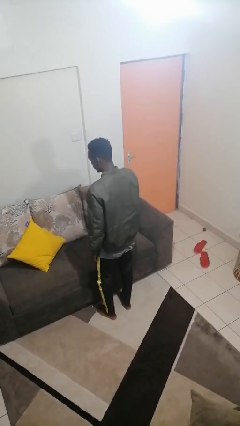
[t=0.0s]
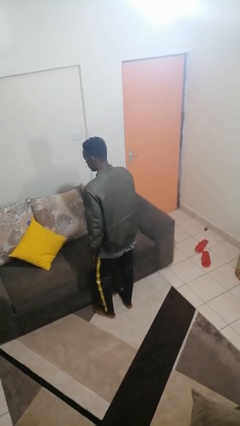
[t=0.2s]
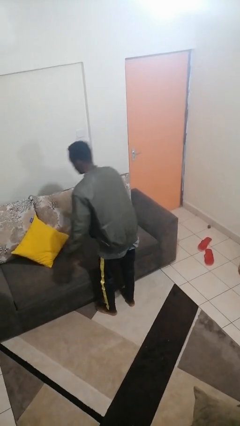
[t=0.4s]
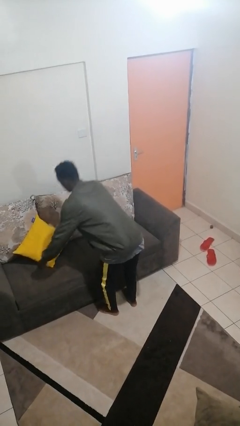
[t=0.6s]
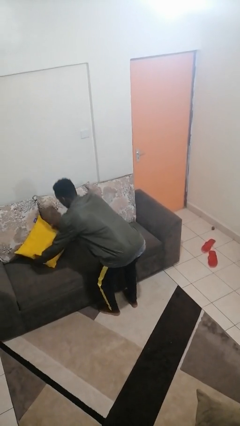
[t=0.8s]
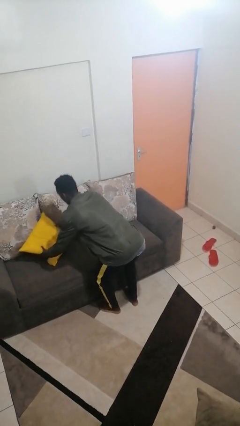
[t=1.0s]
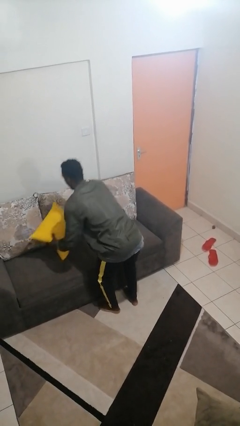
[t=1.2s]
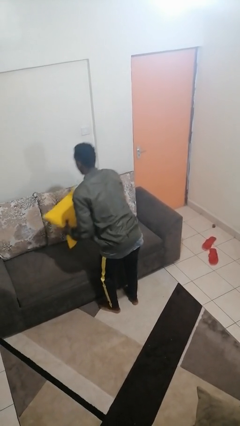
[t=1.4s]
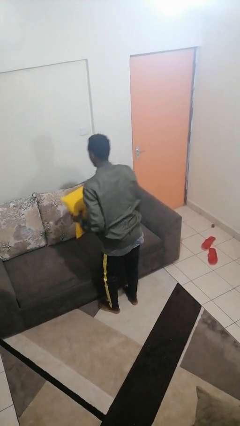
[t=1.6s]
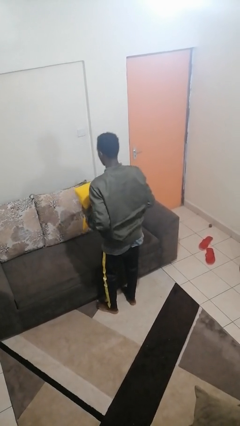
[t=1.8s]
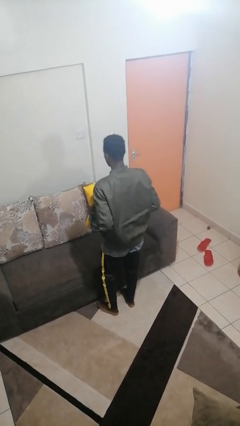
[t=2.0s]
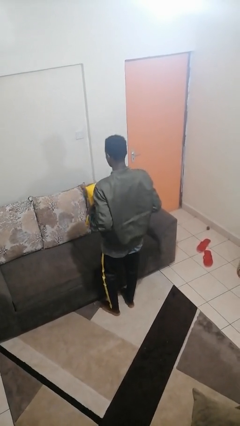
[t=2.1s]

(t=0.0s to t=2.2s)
person picks up object from couch

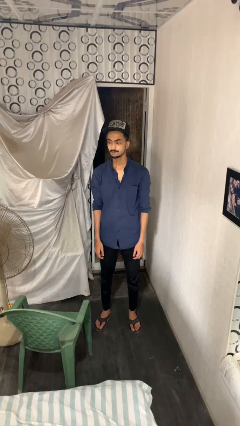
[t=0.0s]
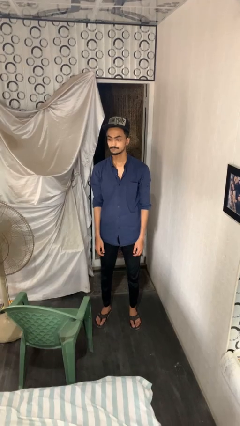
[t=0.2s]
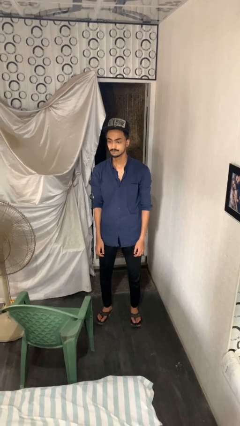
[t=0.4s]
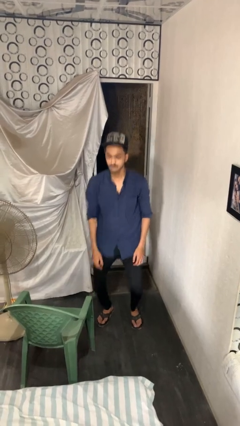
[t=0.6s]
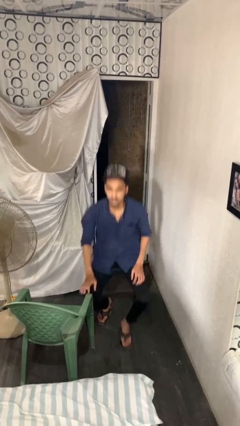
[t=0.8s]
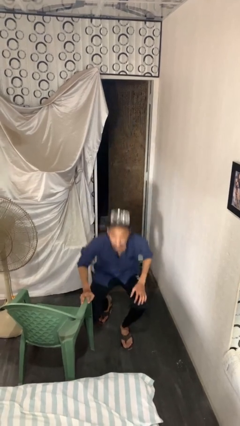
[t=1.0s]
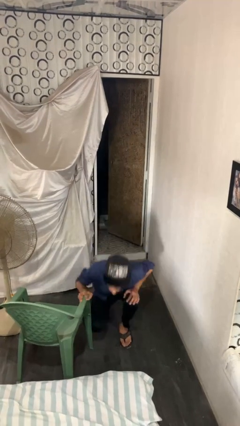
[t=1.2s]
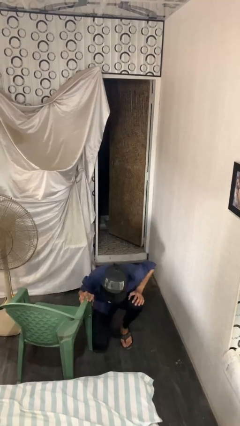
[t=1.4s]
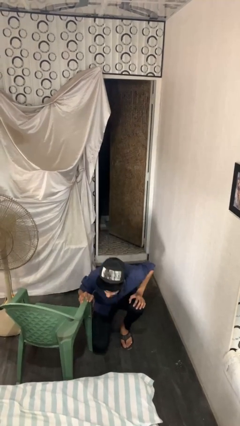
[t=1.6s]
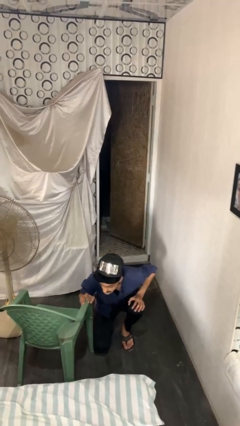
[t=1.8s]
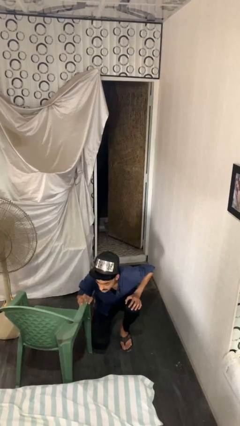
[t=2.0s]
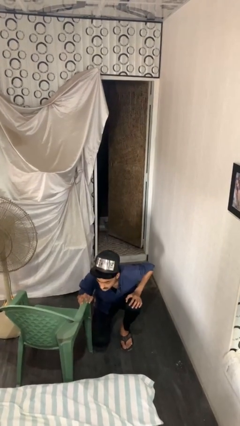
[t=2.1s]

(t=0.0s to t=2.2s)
person trips on object on floor

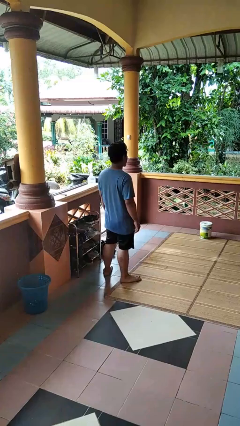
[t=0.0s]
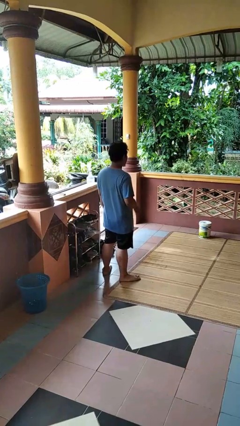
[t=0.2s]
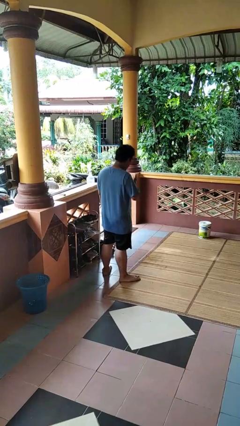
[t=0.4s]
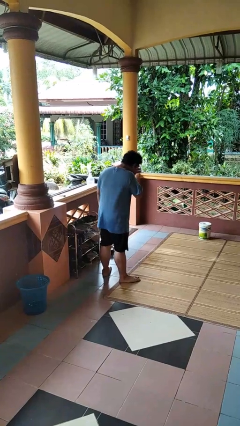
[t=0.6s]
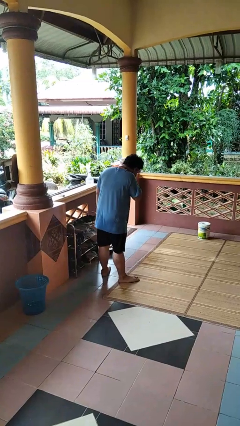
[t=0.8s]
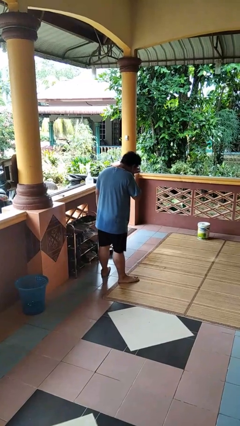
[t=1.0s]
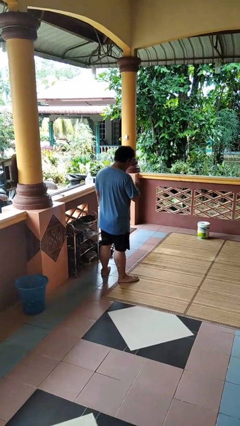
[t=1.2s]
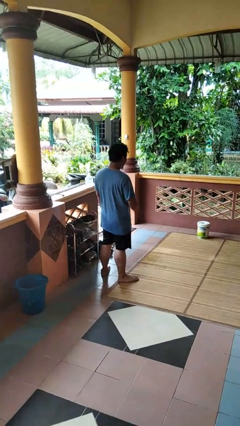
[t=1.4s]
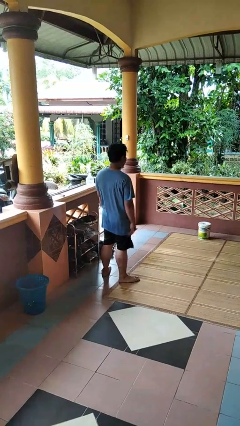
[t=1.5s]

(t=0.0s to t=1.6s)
person sneezes into hand

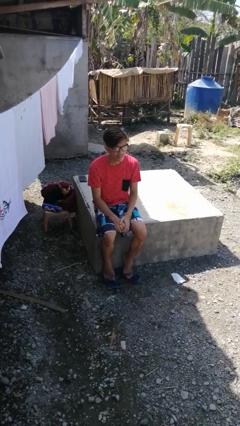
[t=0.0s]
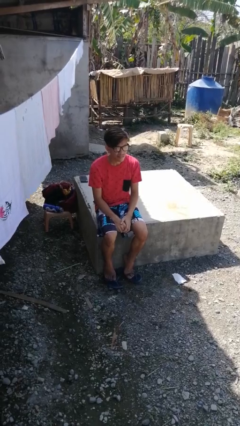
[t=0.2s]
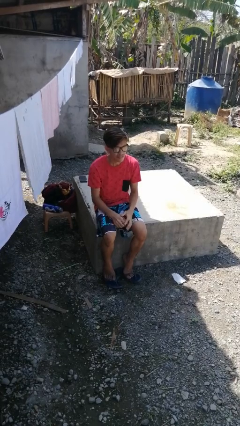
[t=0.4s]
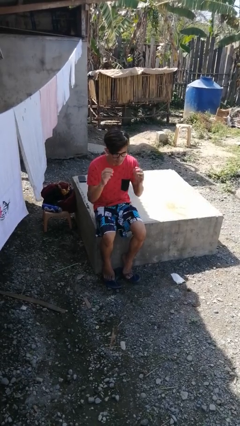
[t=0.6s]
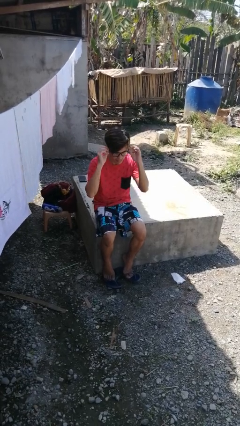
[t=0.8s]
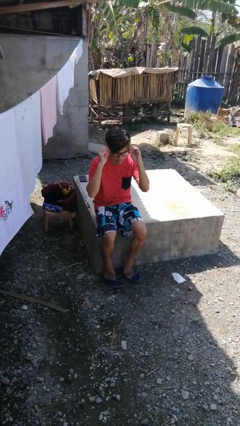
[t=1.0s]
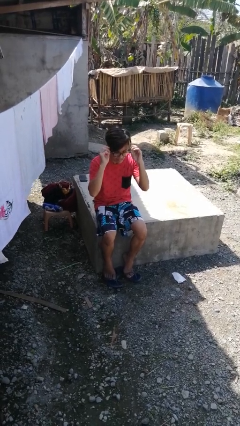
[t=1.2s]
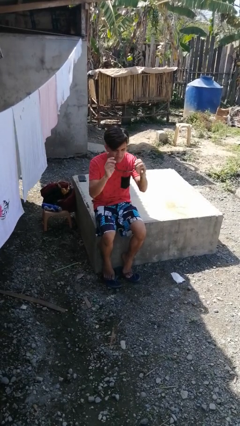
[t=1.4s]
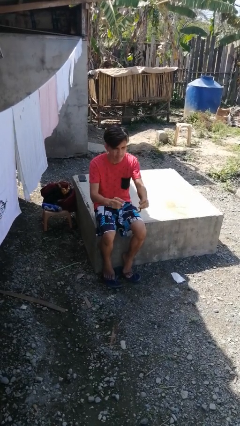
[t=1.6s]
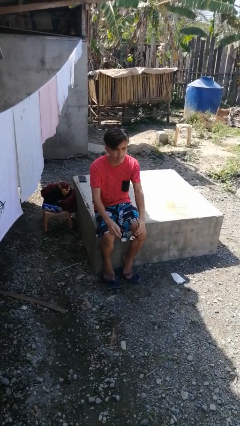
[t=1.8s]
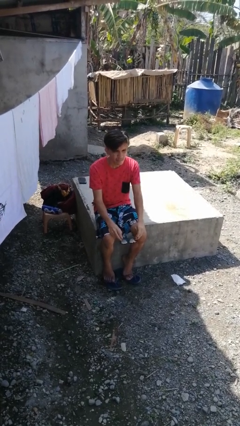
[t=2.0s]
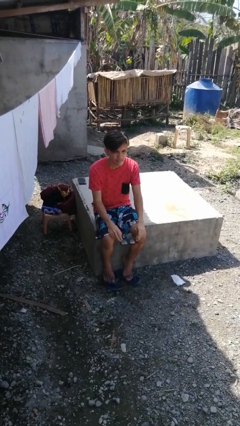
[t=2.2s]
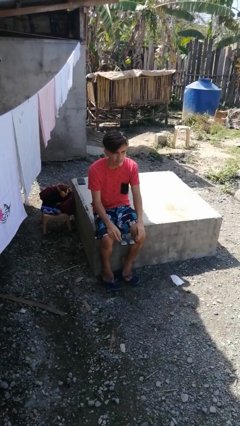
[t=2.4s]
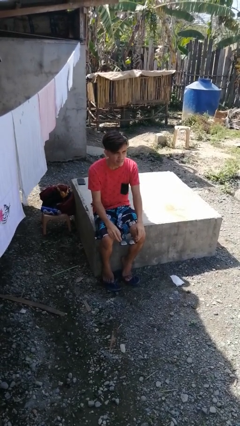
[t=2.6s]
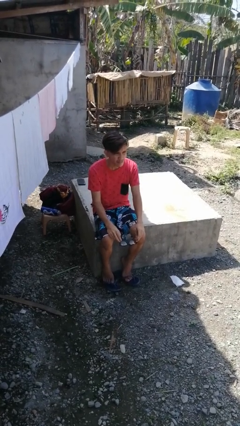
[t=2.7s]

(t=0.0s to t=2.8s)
person takes off glasses

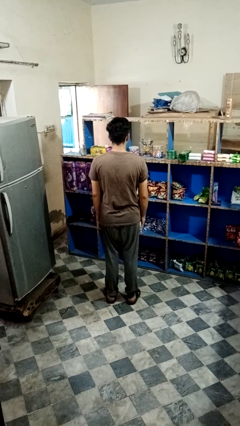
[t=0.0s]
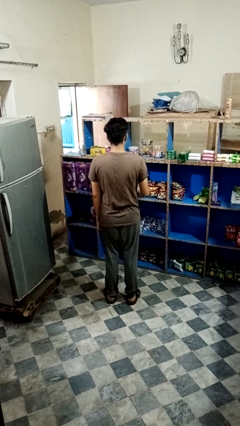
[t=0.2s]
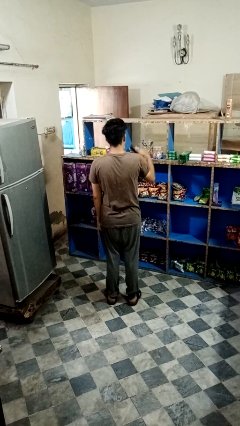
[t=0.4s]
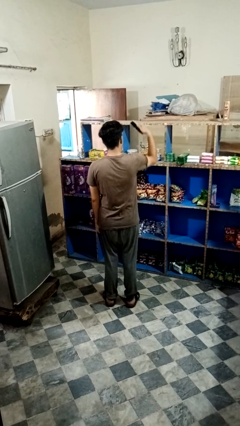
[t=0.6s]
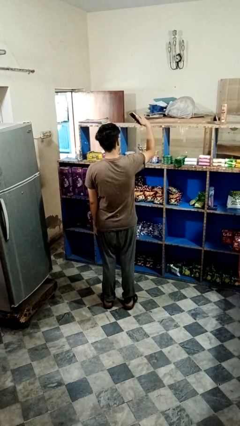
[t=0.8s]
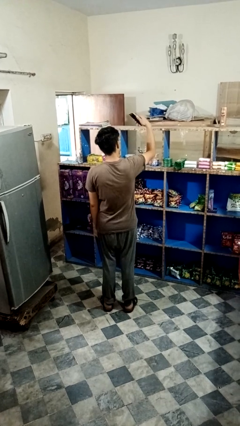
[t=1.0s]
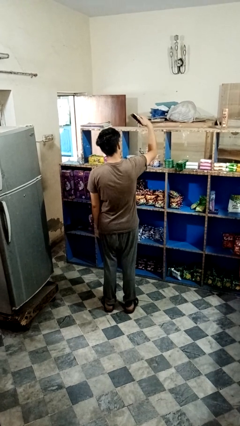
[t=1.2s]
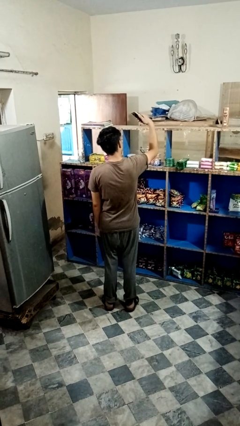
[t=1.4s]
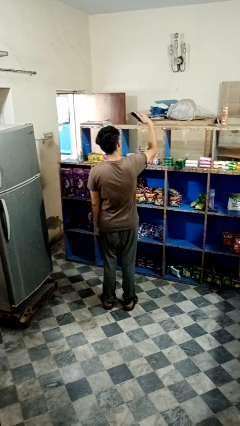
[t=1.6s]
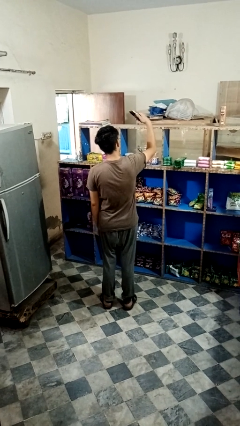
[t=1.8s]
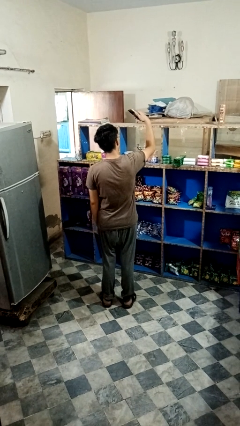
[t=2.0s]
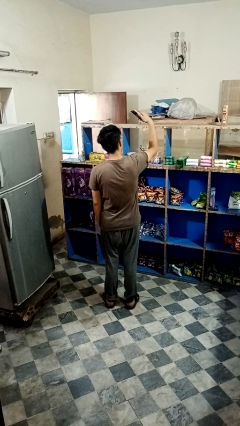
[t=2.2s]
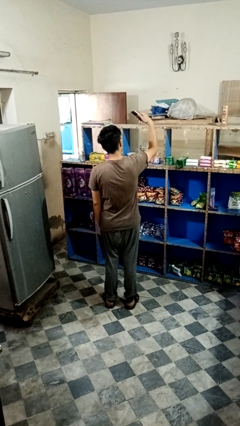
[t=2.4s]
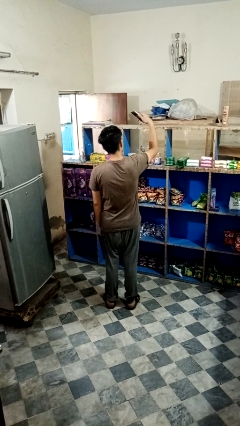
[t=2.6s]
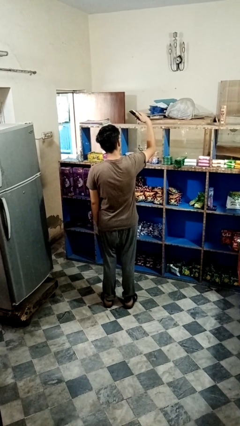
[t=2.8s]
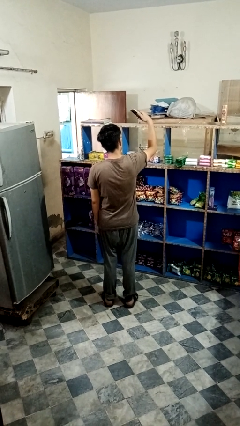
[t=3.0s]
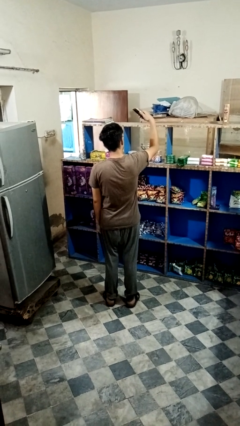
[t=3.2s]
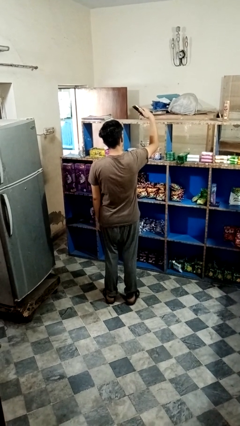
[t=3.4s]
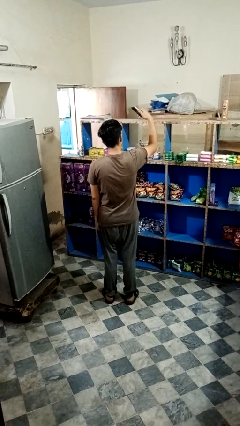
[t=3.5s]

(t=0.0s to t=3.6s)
person takes selfie

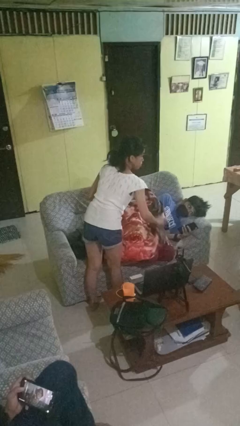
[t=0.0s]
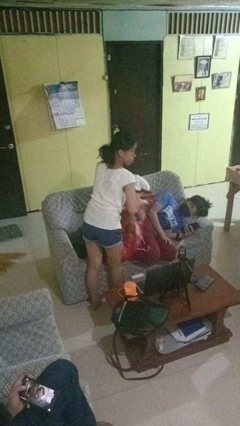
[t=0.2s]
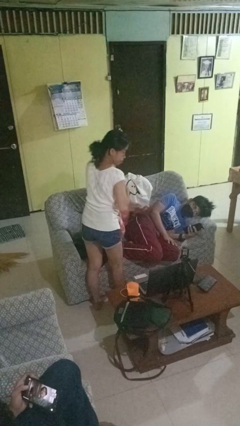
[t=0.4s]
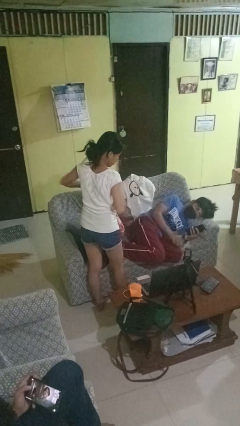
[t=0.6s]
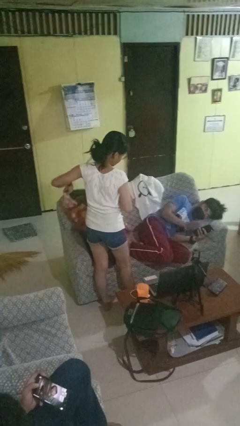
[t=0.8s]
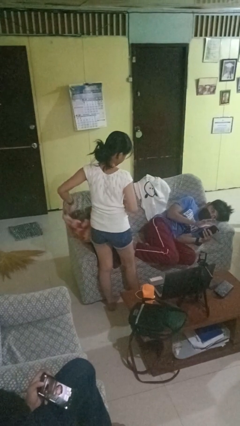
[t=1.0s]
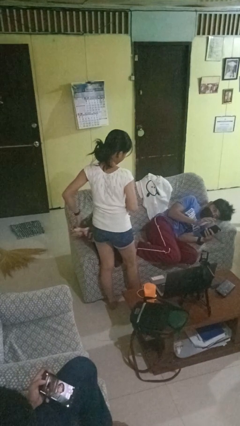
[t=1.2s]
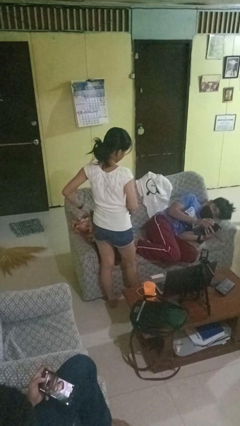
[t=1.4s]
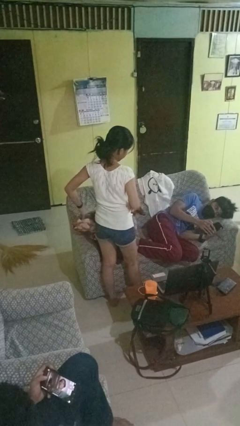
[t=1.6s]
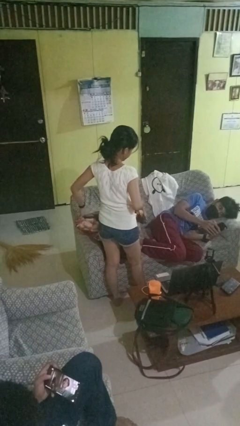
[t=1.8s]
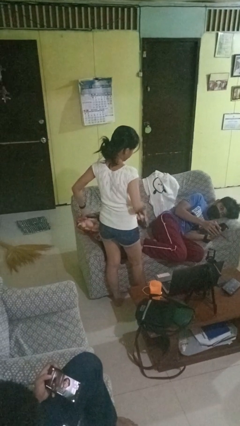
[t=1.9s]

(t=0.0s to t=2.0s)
person uncovers friend with blanket

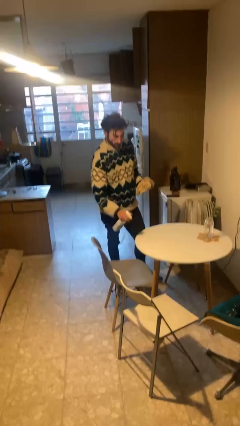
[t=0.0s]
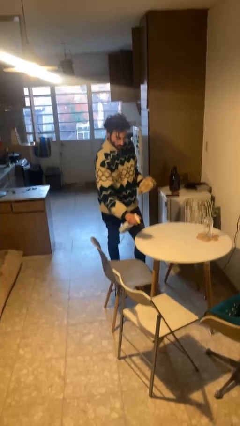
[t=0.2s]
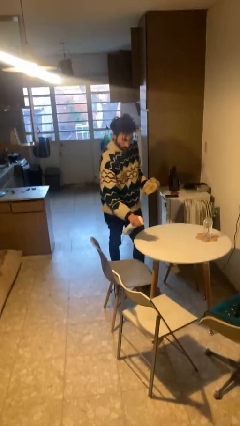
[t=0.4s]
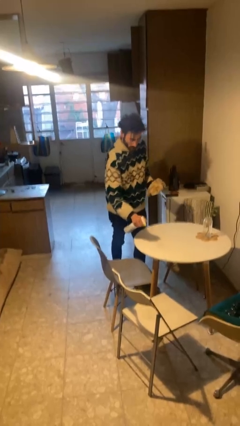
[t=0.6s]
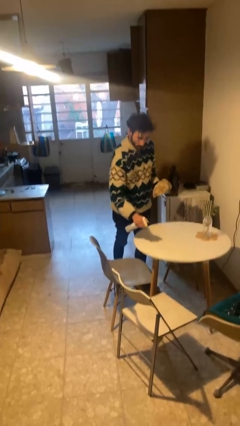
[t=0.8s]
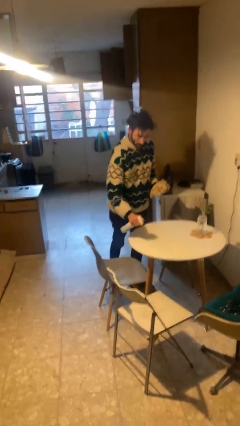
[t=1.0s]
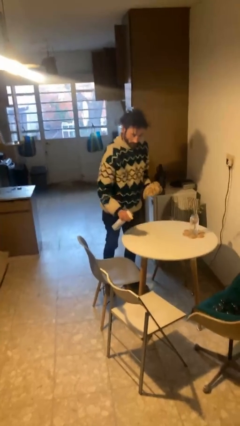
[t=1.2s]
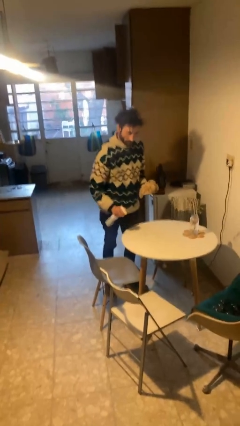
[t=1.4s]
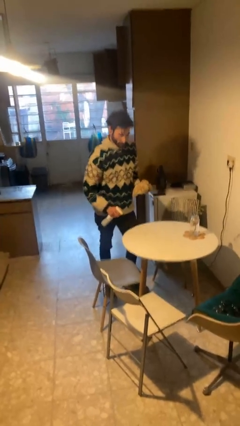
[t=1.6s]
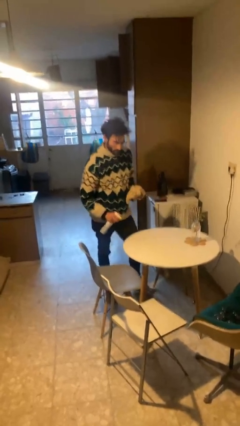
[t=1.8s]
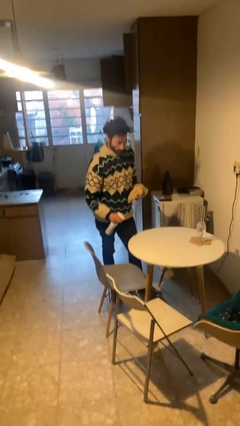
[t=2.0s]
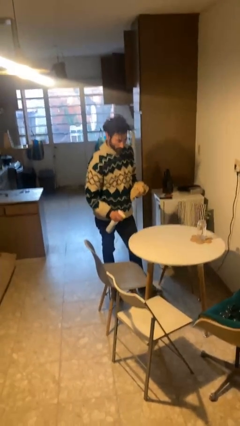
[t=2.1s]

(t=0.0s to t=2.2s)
person sprays from bottle

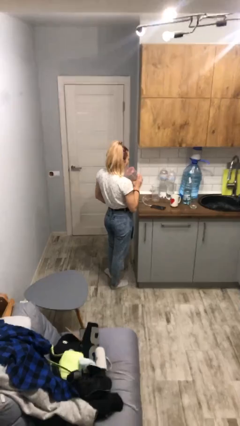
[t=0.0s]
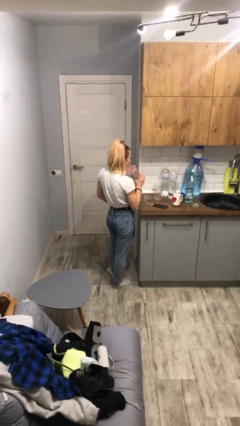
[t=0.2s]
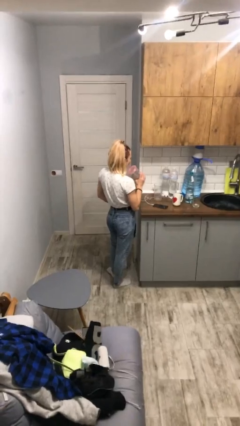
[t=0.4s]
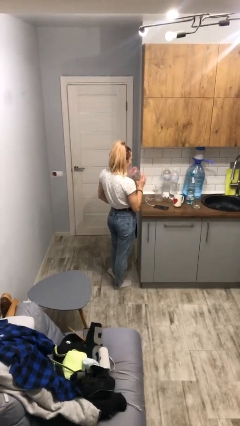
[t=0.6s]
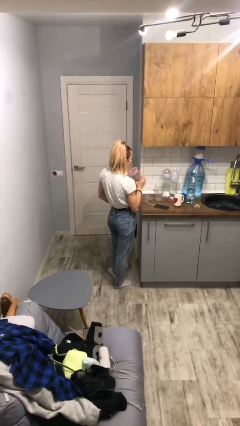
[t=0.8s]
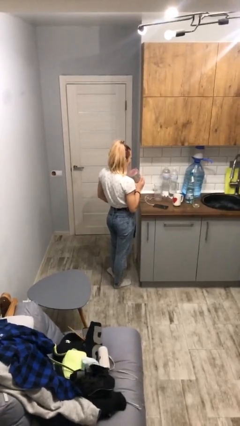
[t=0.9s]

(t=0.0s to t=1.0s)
person drinks from straw
